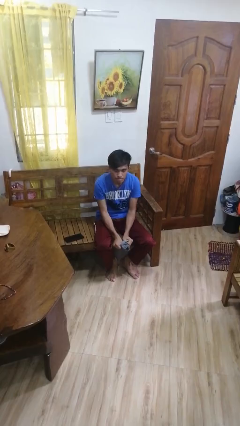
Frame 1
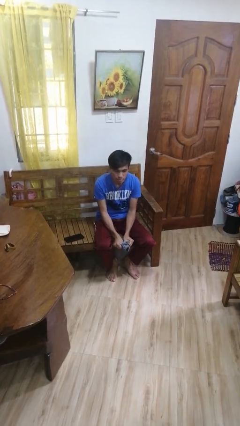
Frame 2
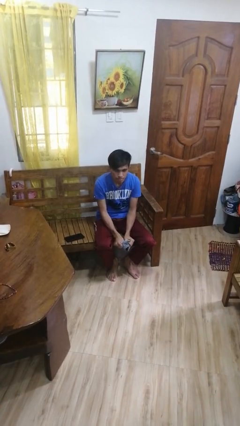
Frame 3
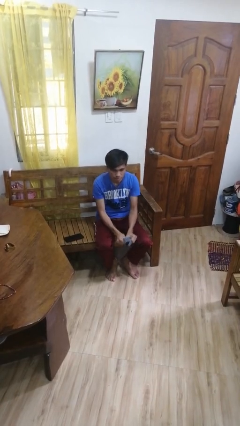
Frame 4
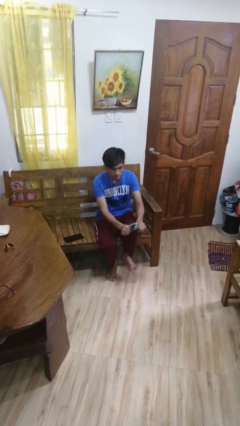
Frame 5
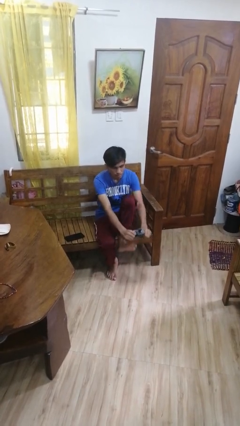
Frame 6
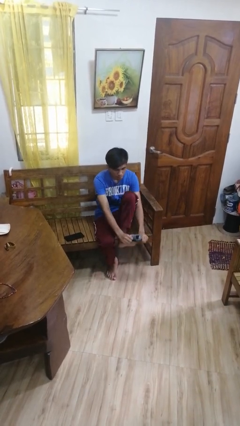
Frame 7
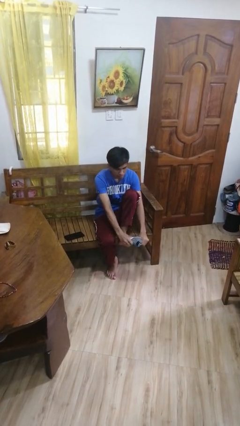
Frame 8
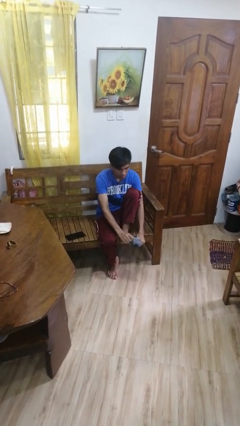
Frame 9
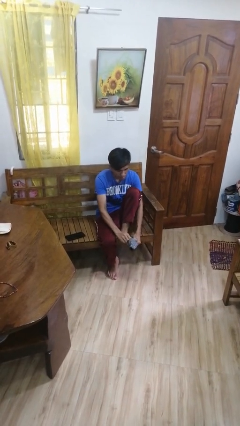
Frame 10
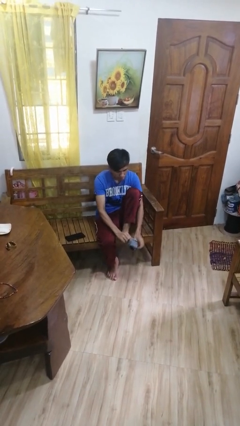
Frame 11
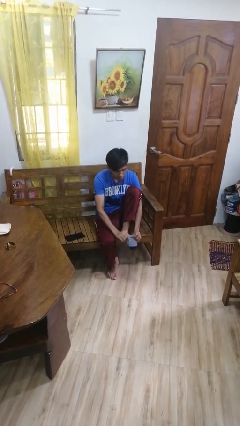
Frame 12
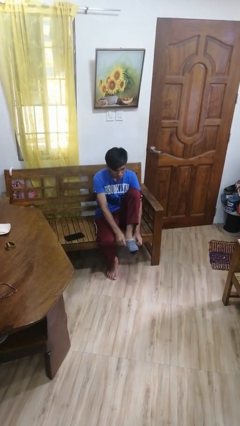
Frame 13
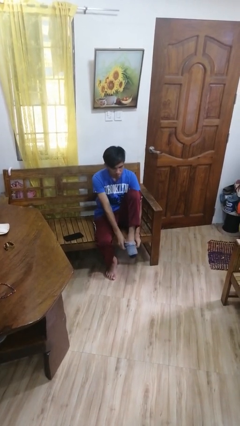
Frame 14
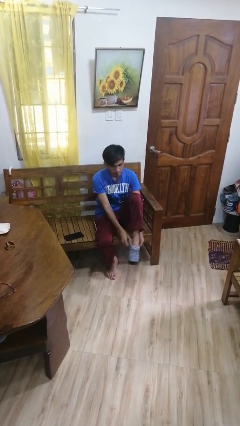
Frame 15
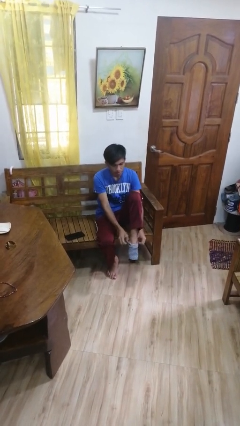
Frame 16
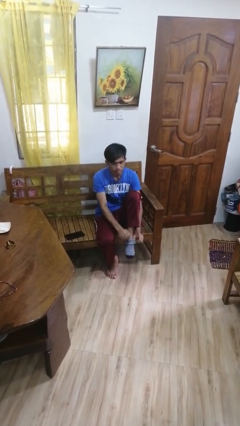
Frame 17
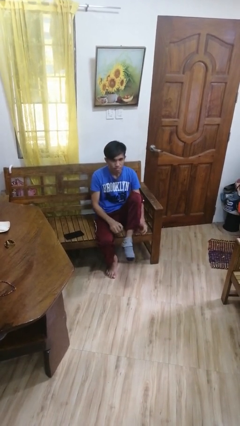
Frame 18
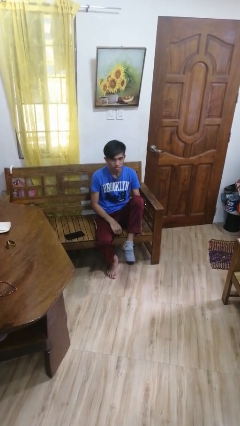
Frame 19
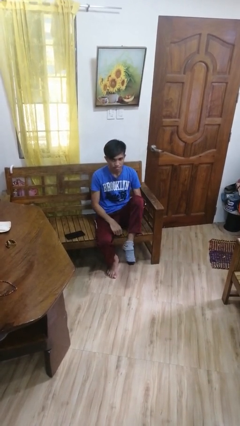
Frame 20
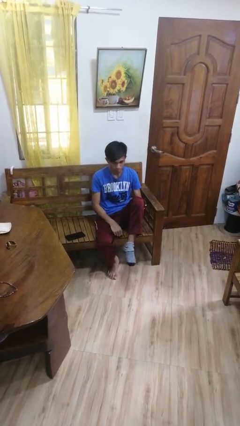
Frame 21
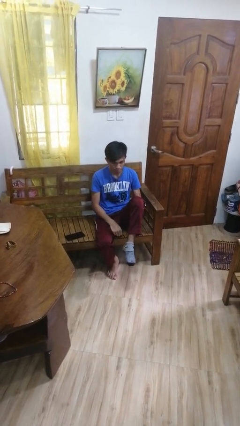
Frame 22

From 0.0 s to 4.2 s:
person puts on socks

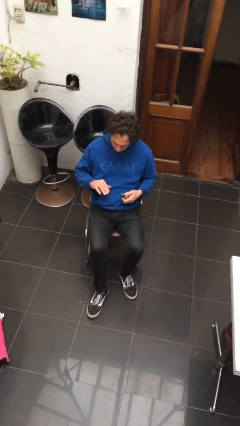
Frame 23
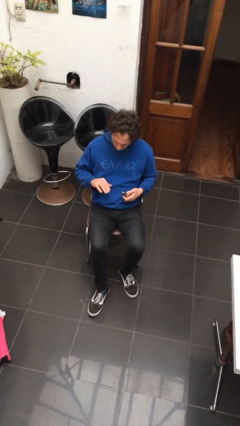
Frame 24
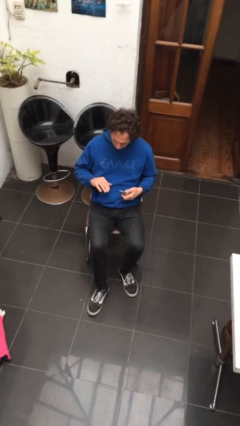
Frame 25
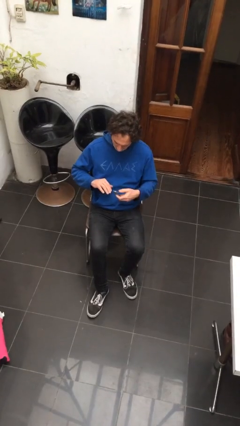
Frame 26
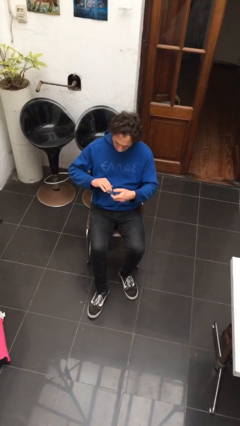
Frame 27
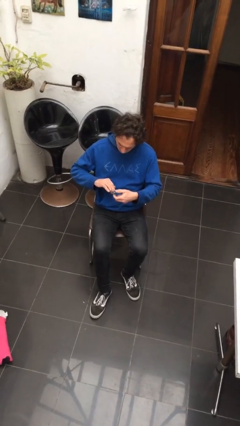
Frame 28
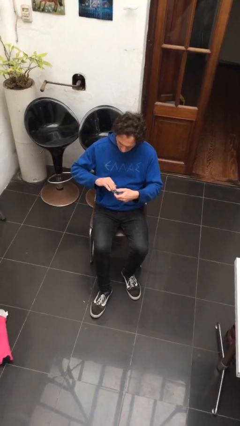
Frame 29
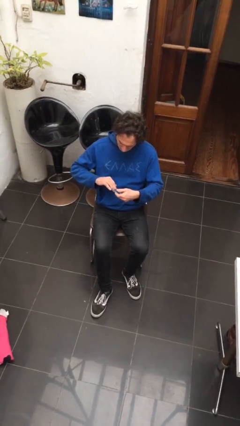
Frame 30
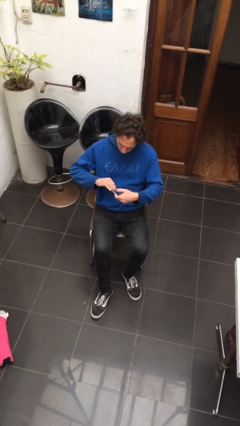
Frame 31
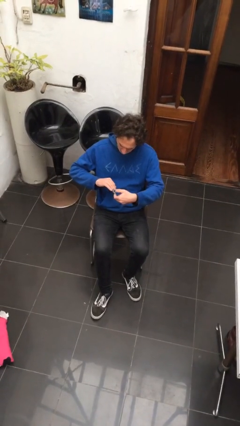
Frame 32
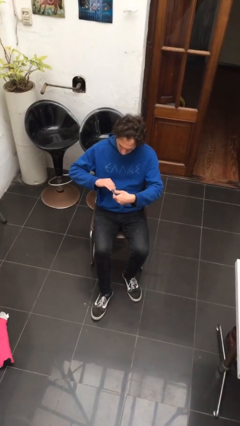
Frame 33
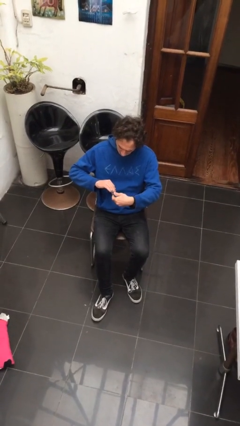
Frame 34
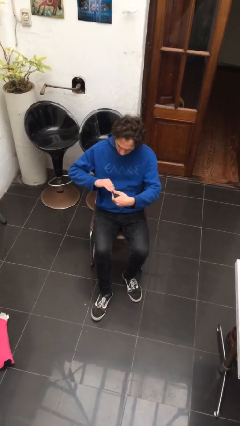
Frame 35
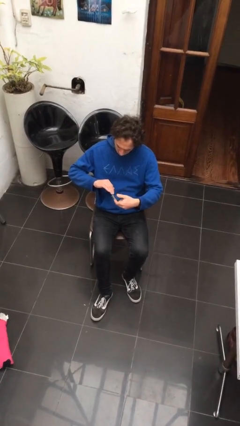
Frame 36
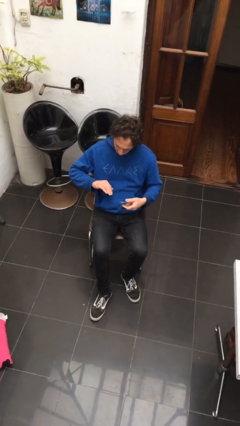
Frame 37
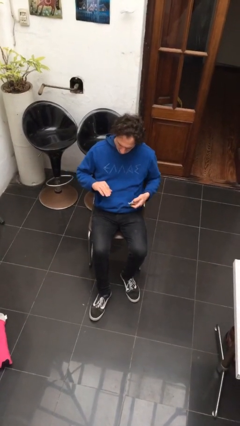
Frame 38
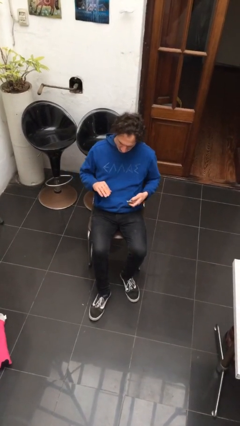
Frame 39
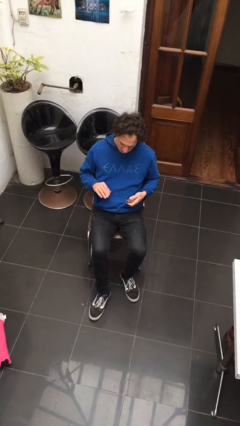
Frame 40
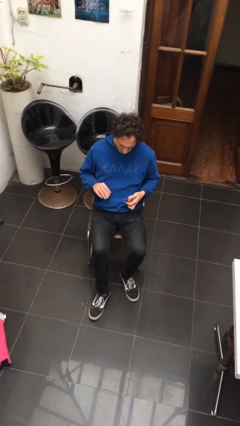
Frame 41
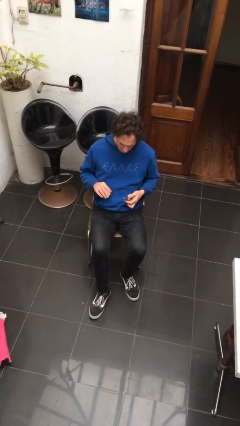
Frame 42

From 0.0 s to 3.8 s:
person clips fingernails

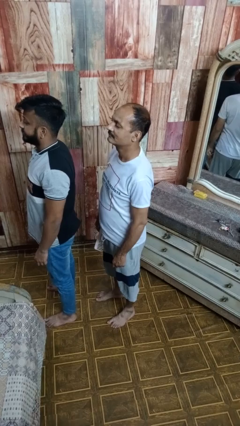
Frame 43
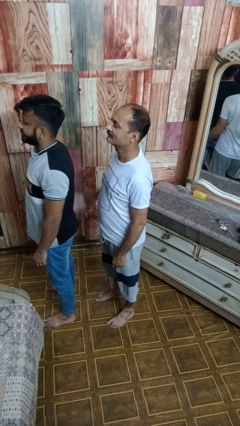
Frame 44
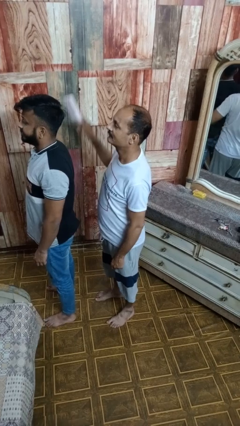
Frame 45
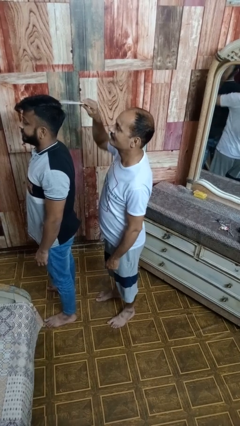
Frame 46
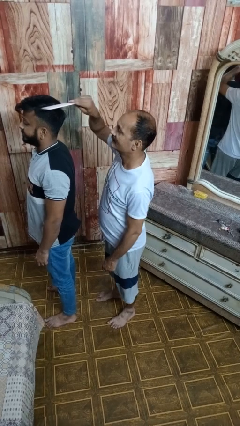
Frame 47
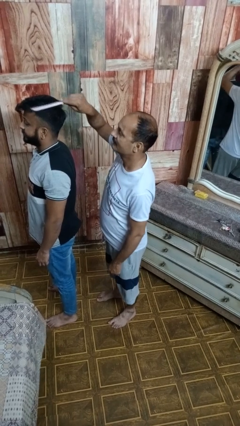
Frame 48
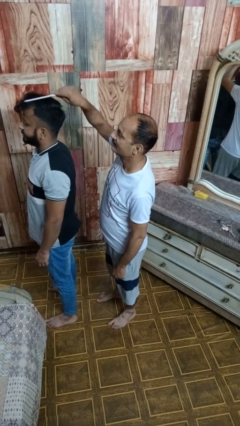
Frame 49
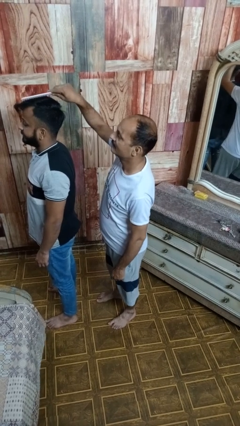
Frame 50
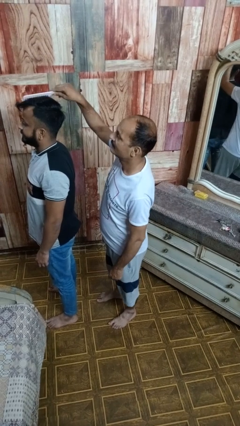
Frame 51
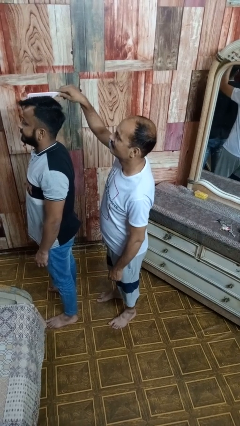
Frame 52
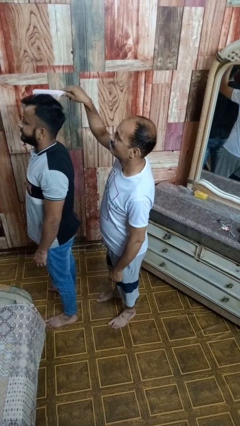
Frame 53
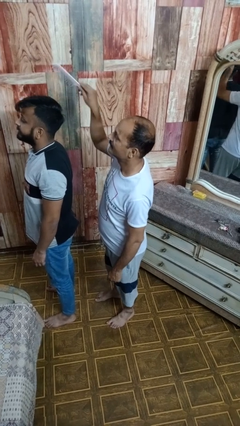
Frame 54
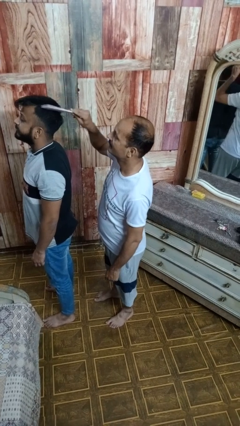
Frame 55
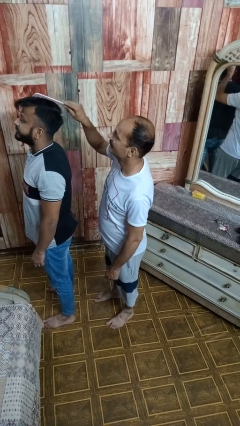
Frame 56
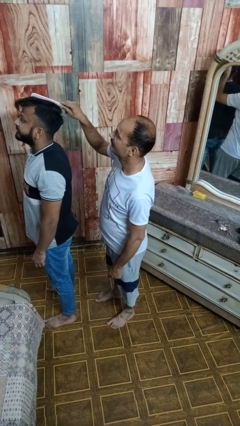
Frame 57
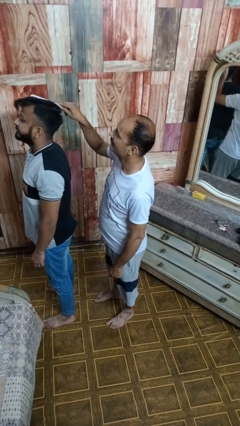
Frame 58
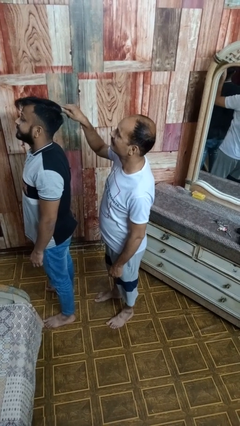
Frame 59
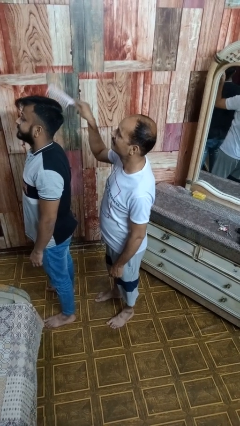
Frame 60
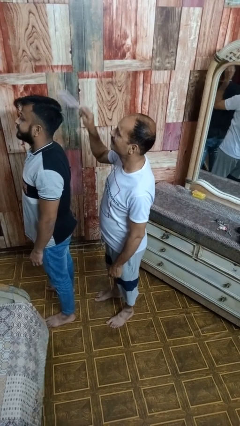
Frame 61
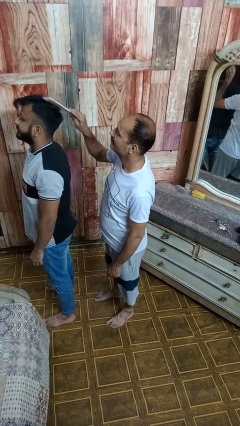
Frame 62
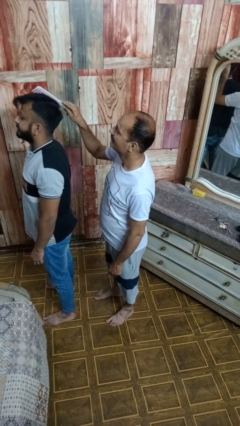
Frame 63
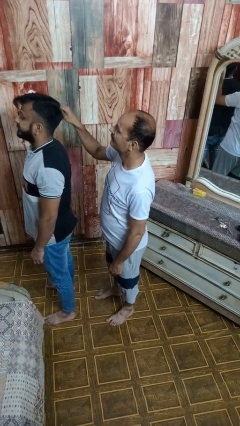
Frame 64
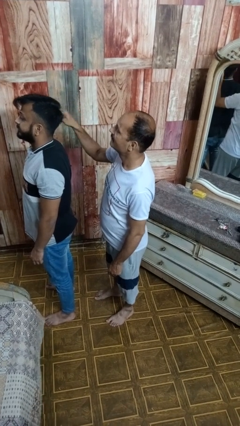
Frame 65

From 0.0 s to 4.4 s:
person brushes hair of person

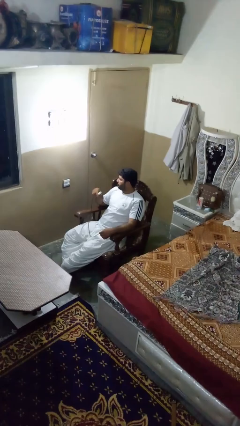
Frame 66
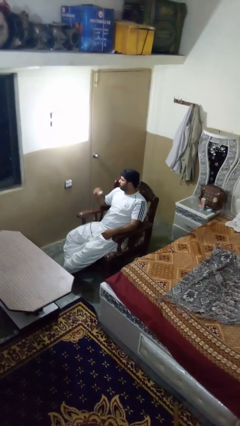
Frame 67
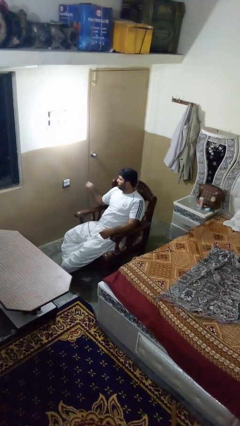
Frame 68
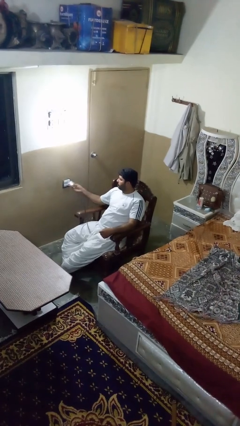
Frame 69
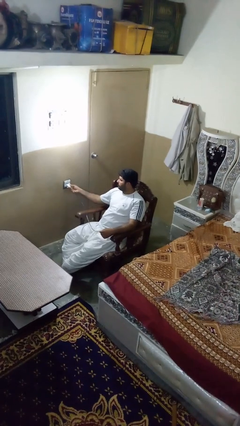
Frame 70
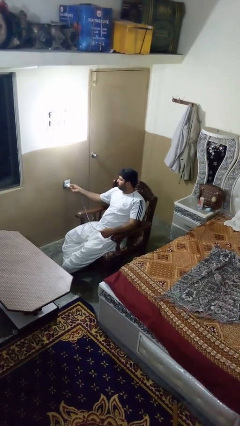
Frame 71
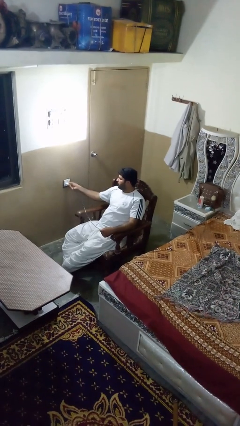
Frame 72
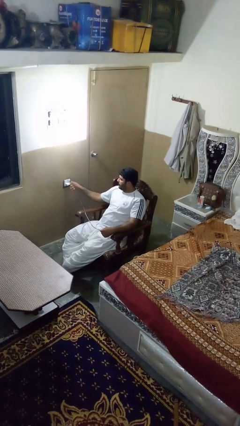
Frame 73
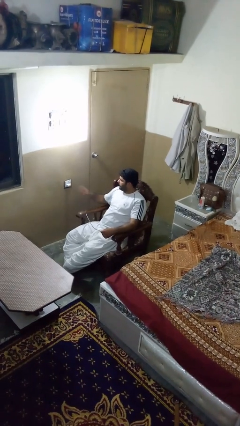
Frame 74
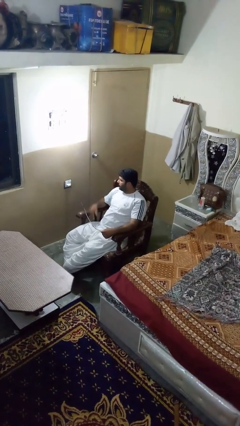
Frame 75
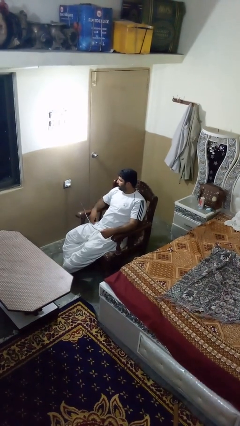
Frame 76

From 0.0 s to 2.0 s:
person plugs into electrical socket

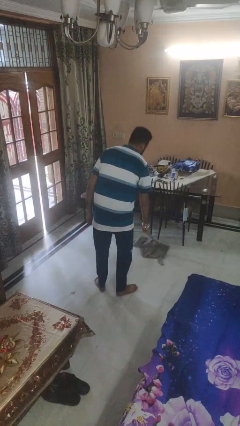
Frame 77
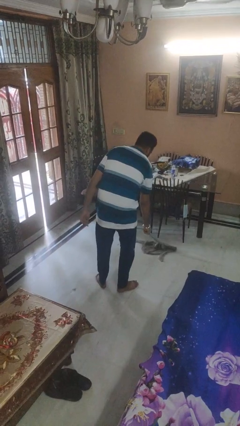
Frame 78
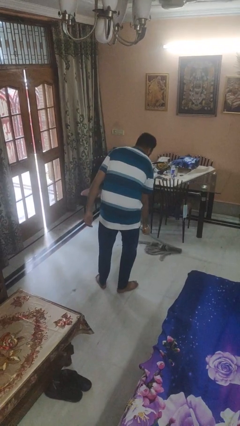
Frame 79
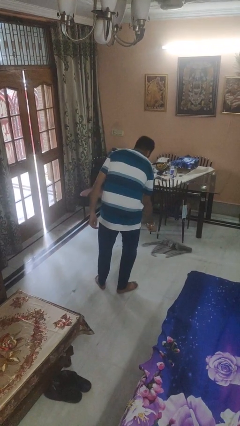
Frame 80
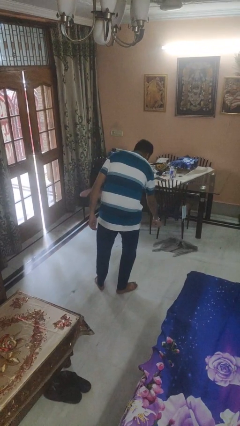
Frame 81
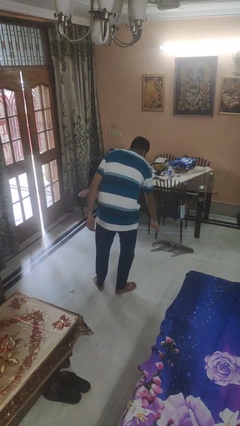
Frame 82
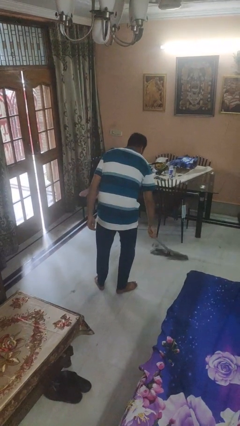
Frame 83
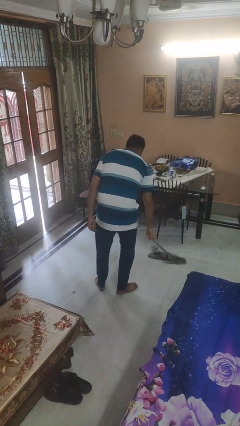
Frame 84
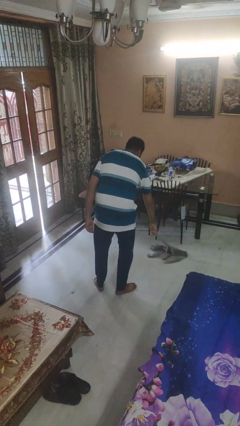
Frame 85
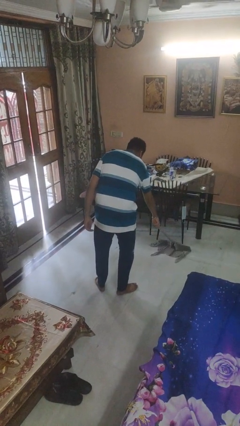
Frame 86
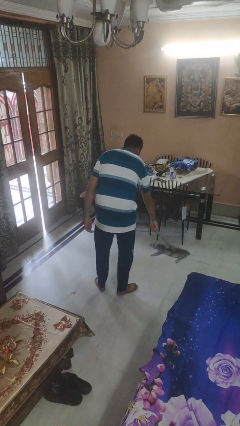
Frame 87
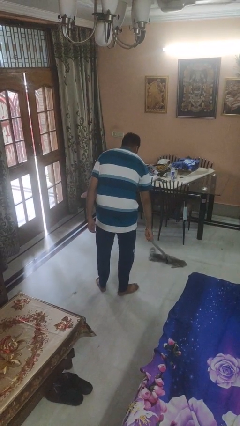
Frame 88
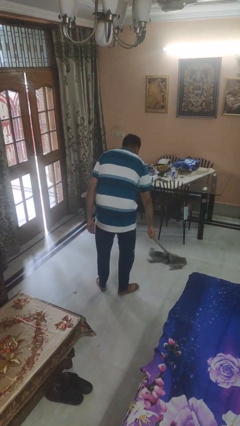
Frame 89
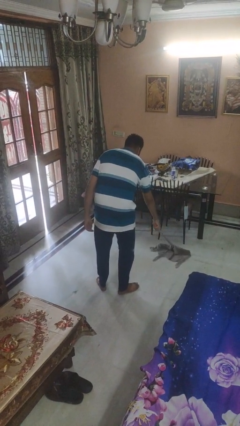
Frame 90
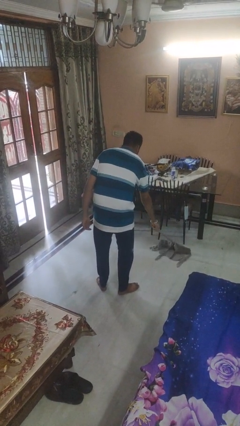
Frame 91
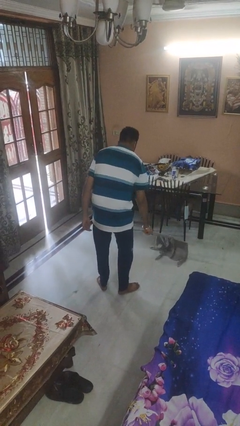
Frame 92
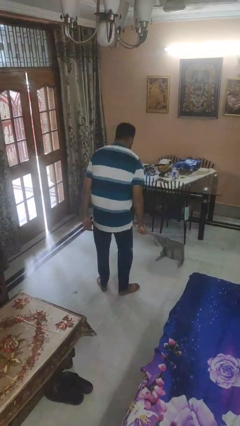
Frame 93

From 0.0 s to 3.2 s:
person mops

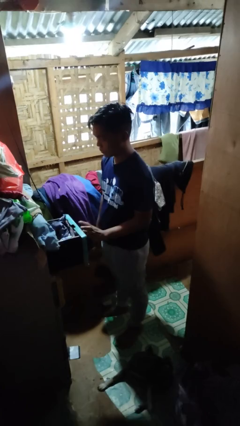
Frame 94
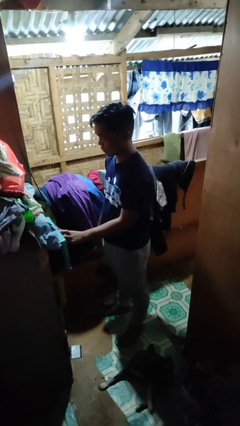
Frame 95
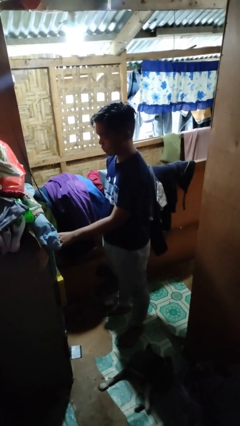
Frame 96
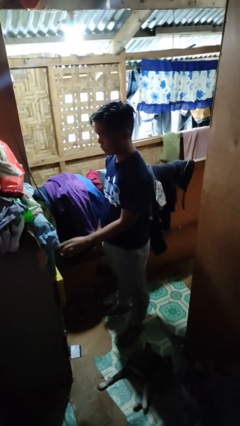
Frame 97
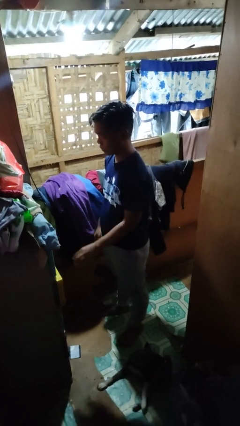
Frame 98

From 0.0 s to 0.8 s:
person closes dresser drawer
